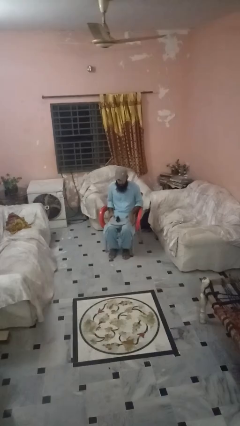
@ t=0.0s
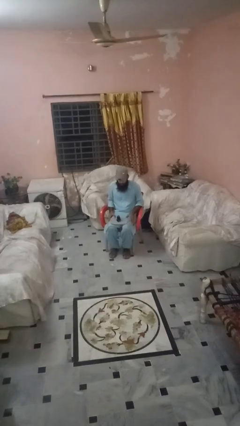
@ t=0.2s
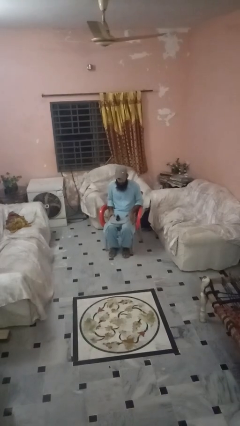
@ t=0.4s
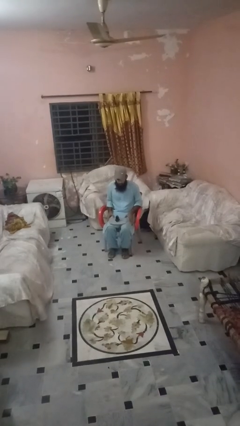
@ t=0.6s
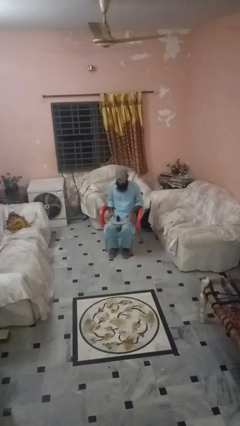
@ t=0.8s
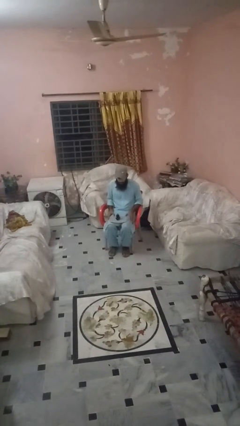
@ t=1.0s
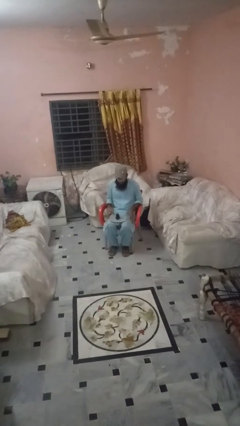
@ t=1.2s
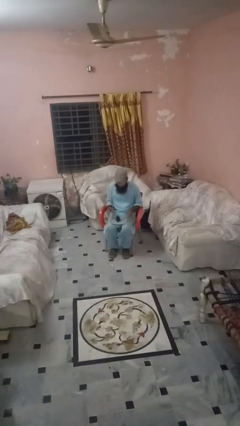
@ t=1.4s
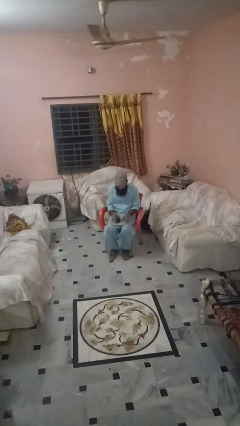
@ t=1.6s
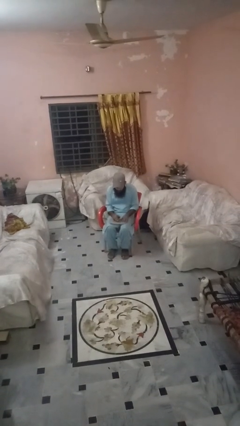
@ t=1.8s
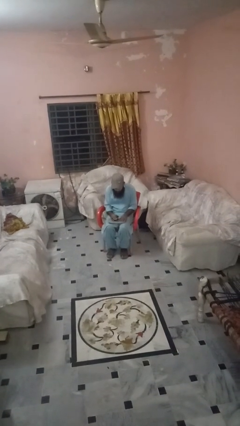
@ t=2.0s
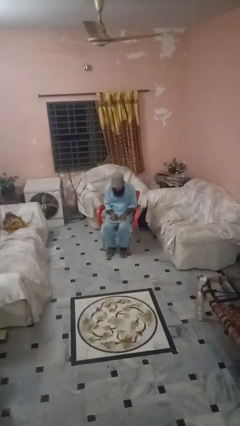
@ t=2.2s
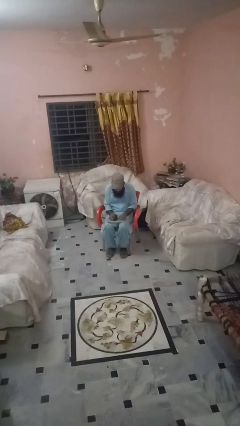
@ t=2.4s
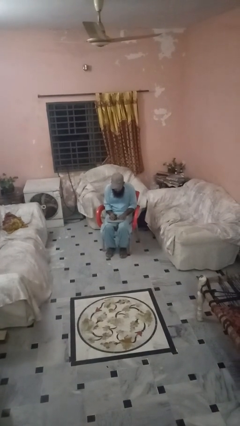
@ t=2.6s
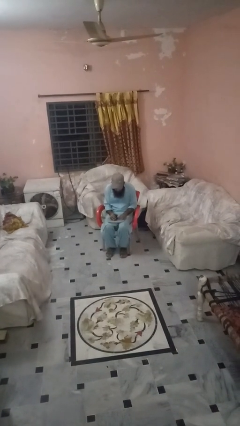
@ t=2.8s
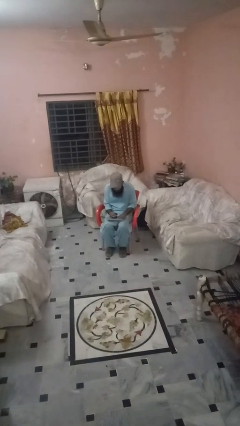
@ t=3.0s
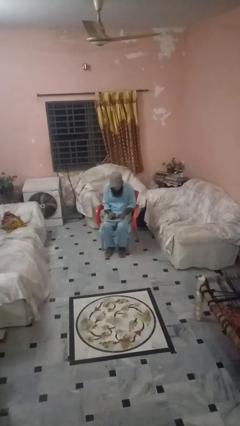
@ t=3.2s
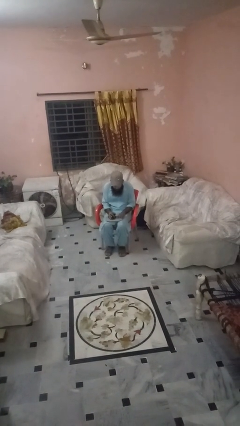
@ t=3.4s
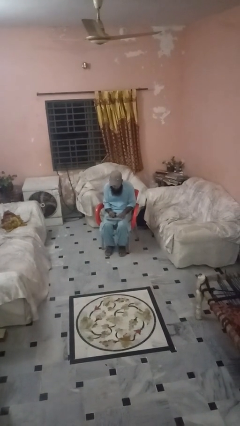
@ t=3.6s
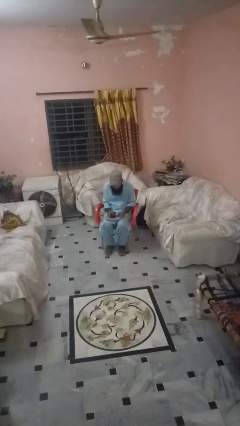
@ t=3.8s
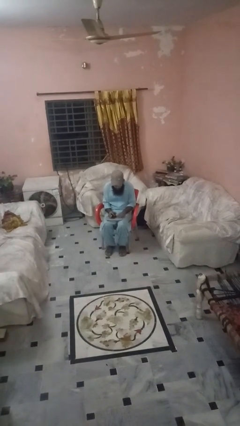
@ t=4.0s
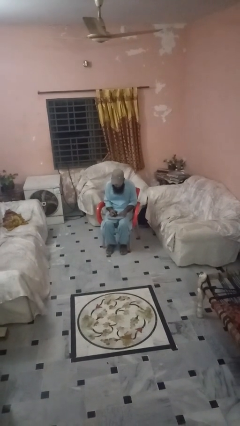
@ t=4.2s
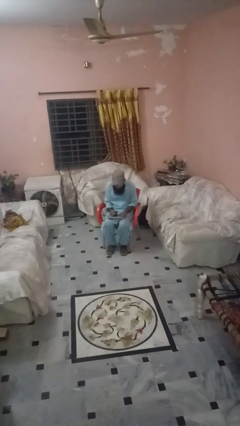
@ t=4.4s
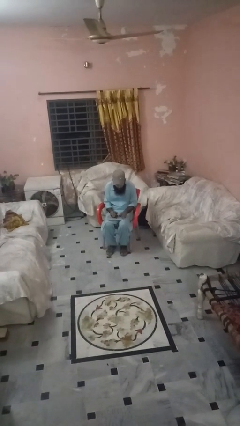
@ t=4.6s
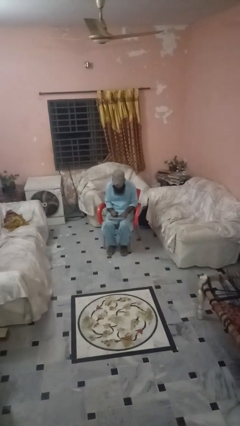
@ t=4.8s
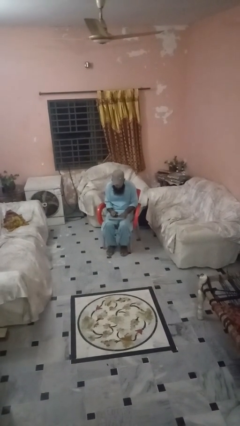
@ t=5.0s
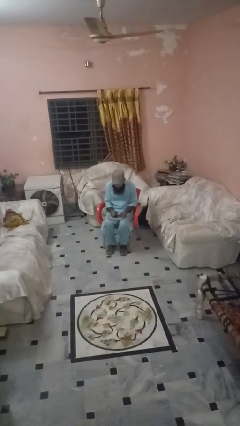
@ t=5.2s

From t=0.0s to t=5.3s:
person interacts with handheld game

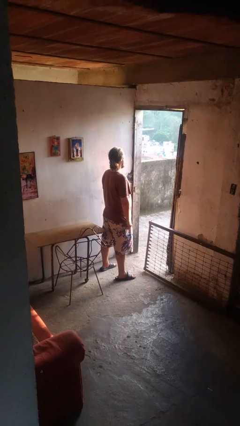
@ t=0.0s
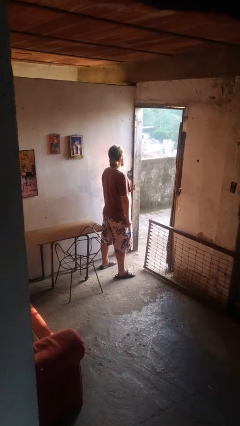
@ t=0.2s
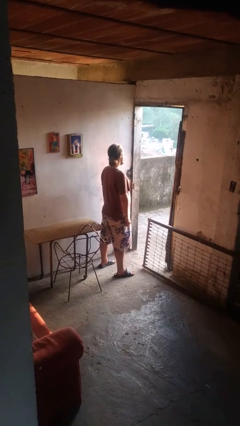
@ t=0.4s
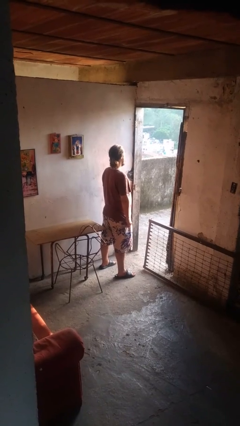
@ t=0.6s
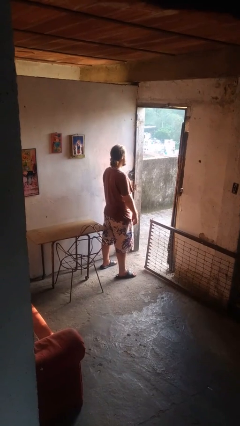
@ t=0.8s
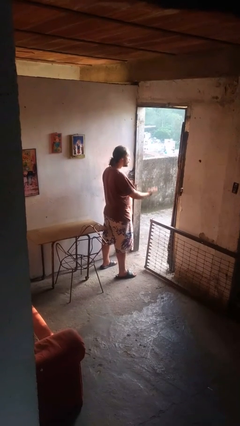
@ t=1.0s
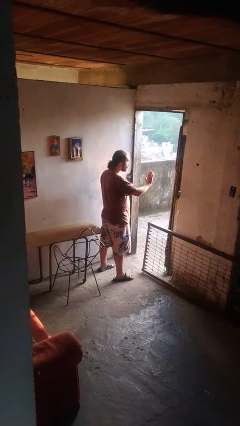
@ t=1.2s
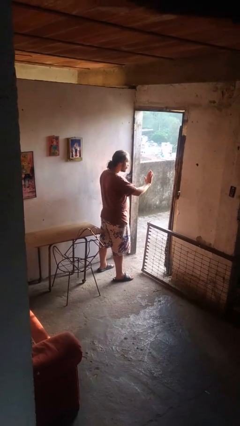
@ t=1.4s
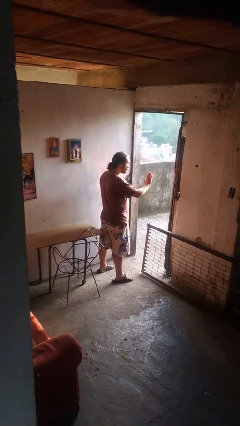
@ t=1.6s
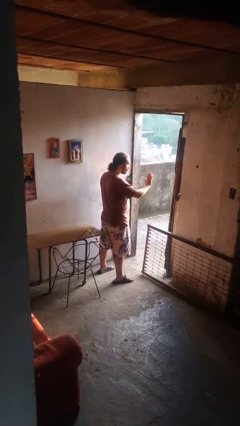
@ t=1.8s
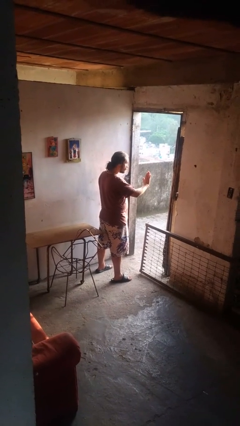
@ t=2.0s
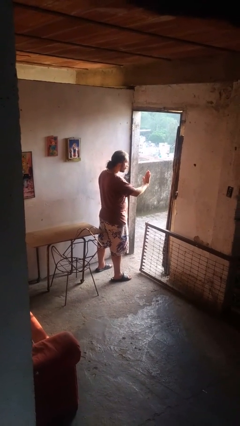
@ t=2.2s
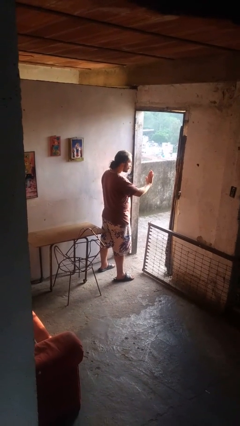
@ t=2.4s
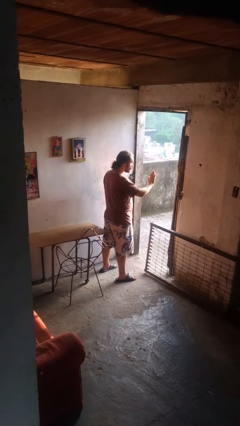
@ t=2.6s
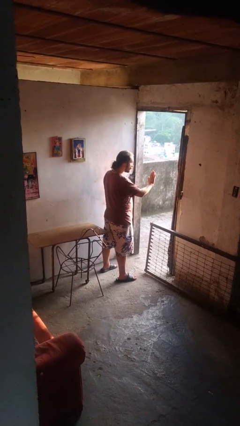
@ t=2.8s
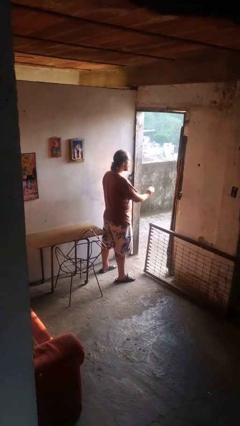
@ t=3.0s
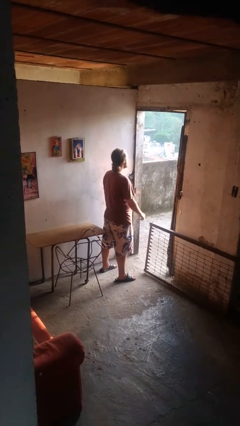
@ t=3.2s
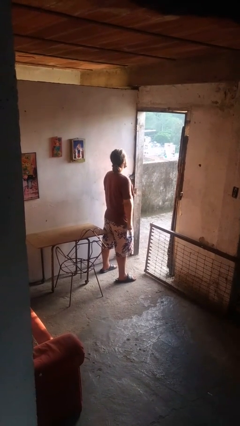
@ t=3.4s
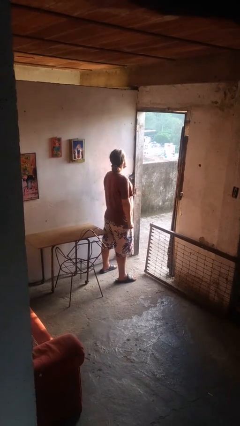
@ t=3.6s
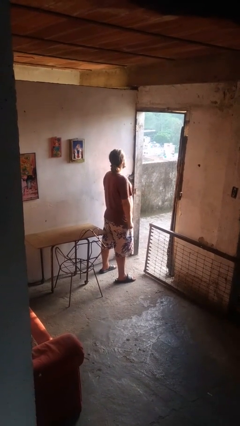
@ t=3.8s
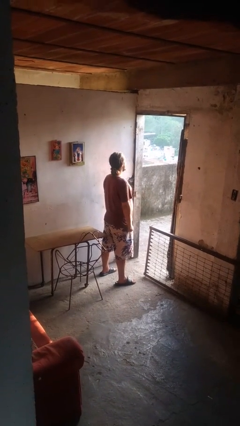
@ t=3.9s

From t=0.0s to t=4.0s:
person gestures stop

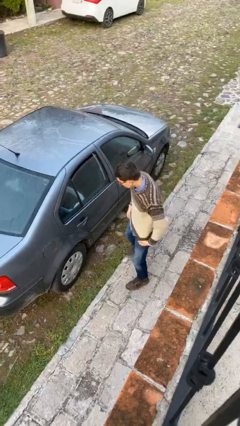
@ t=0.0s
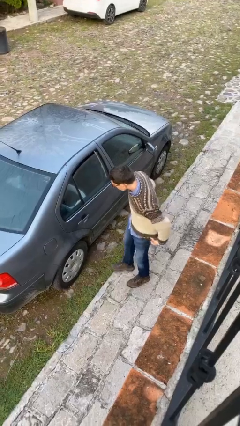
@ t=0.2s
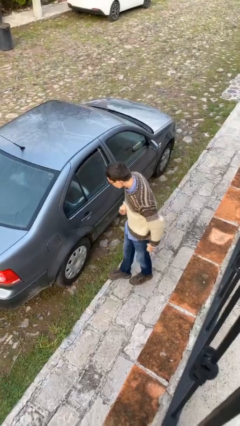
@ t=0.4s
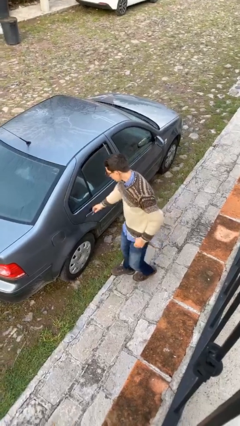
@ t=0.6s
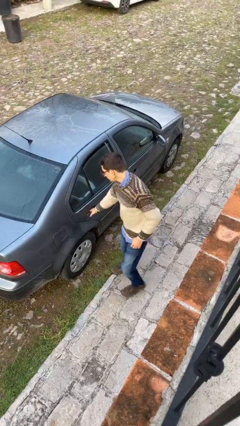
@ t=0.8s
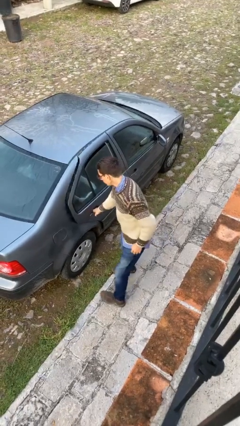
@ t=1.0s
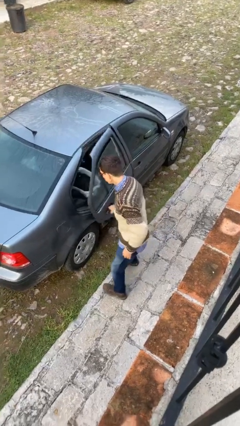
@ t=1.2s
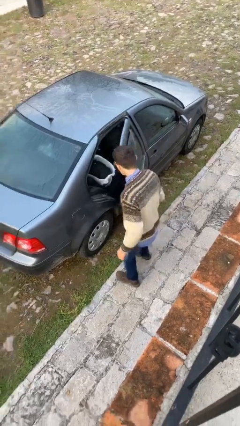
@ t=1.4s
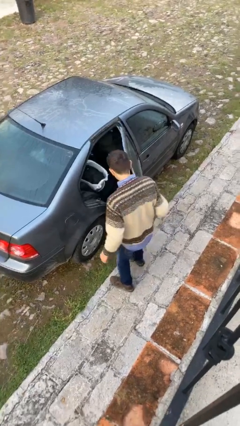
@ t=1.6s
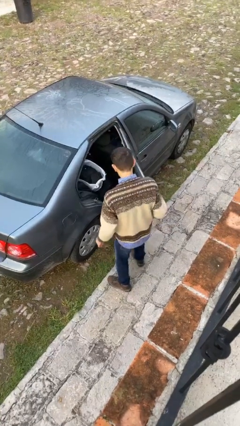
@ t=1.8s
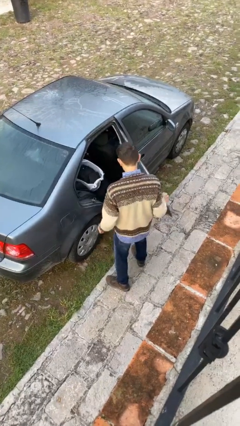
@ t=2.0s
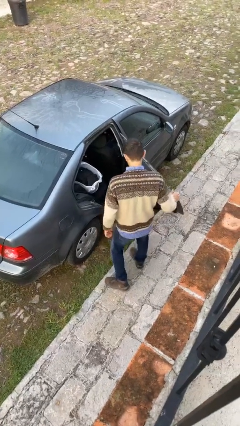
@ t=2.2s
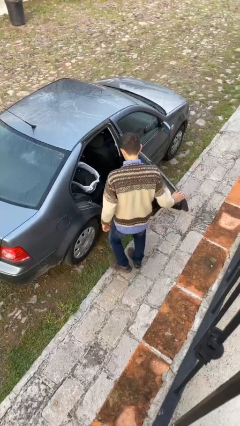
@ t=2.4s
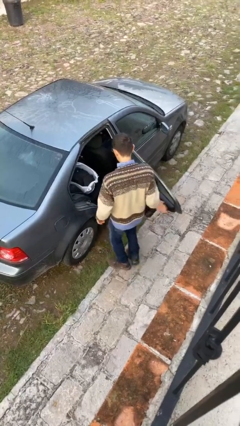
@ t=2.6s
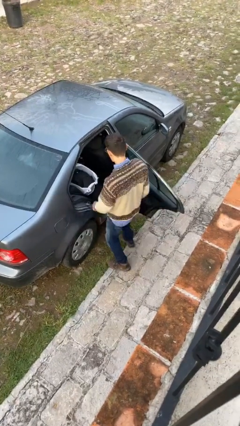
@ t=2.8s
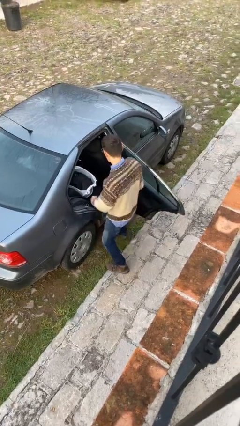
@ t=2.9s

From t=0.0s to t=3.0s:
person opens car door

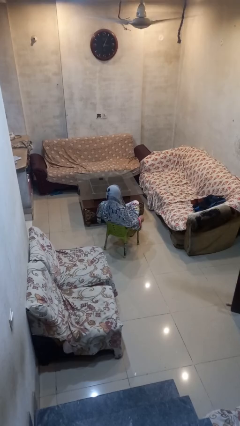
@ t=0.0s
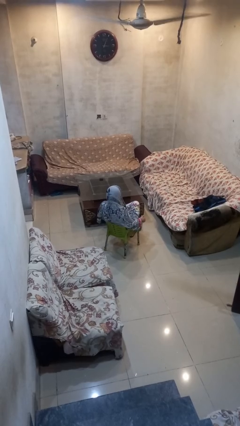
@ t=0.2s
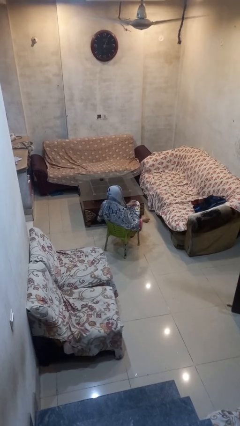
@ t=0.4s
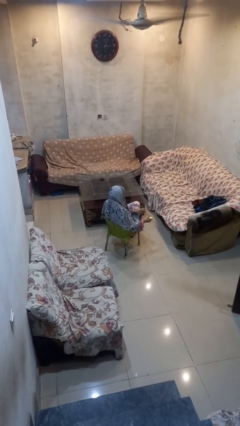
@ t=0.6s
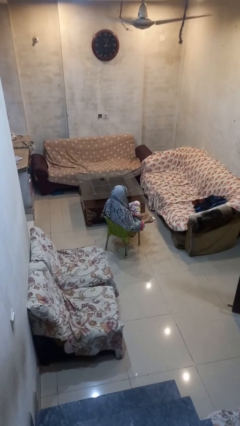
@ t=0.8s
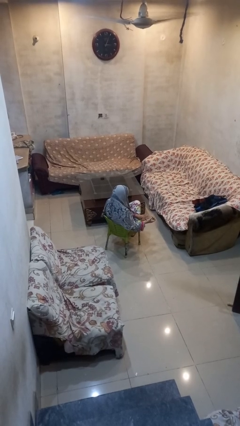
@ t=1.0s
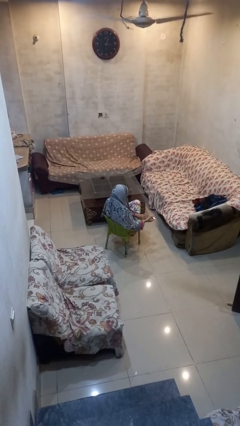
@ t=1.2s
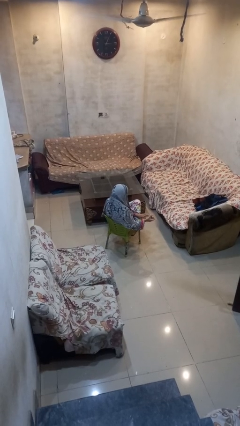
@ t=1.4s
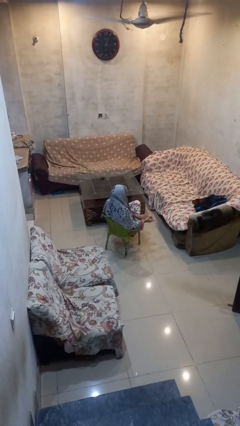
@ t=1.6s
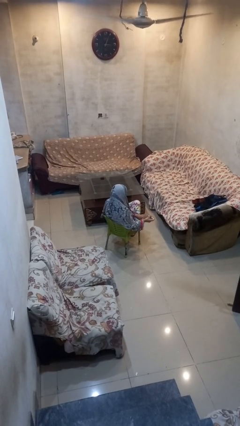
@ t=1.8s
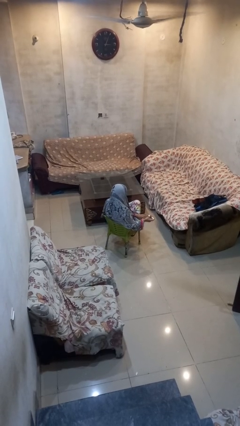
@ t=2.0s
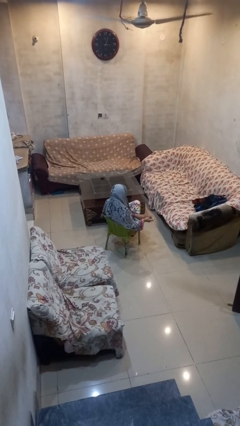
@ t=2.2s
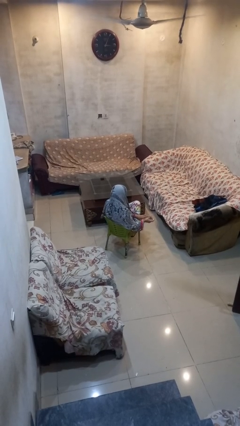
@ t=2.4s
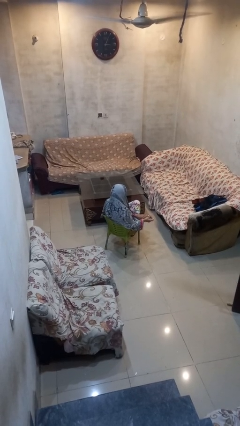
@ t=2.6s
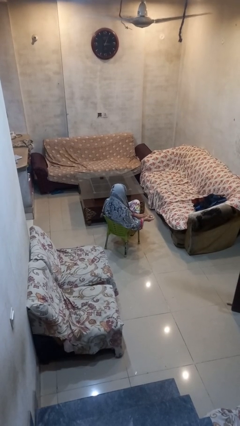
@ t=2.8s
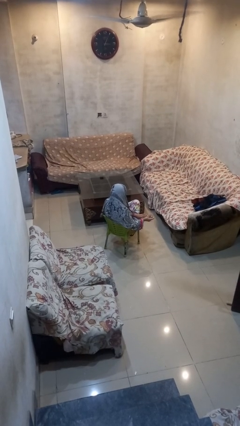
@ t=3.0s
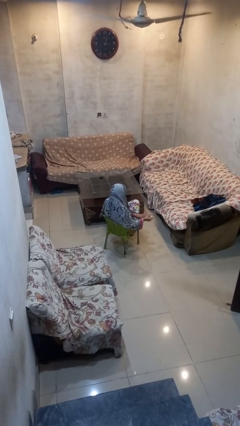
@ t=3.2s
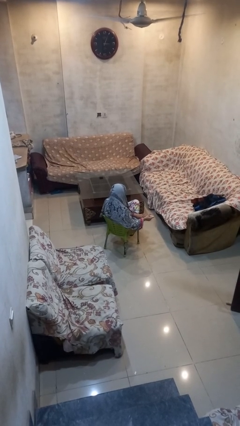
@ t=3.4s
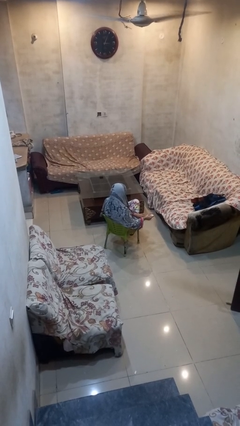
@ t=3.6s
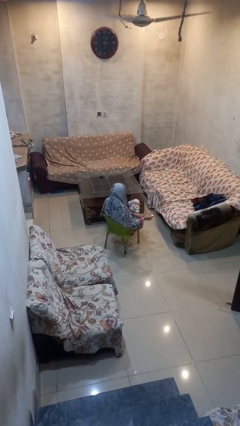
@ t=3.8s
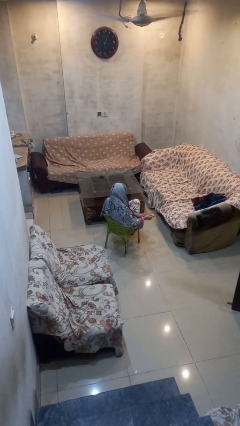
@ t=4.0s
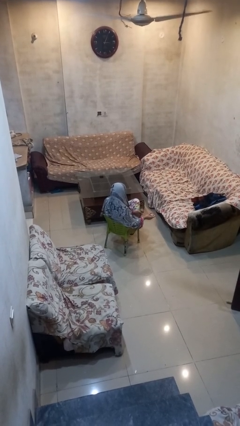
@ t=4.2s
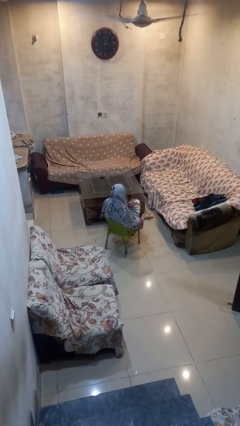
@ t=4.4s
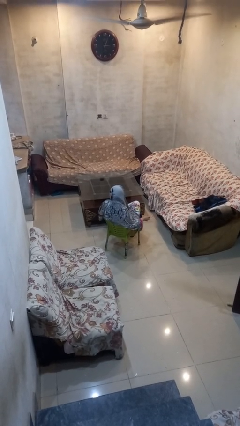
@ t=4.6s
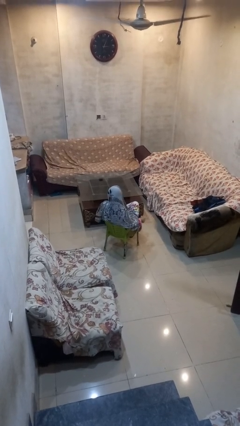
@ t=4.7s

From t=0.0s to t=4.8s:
person clips fingernails

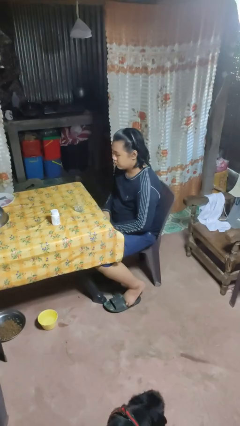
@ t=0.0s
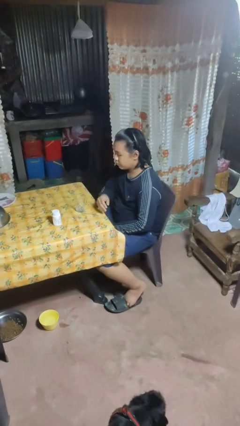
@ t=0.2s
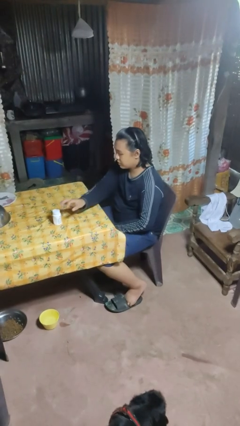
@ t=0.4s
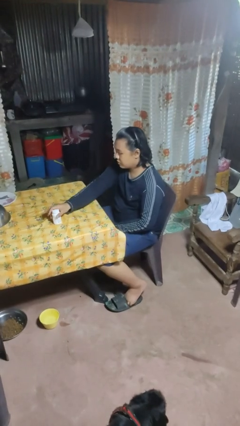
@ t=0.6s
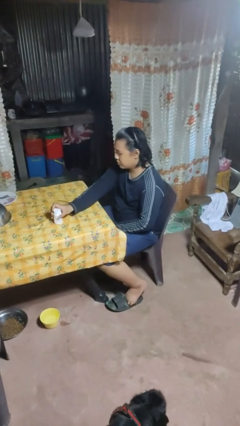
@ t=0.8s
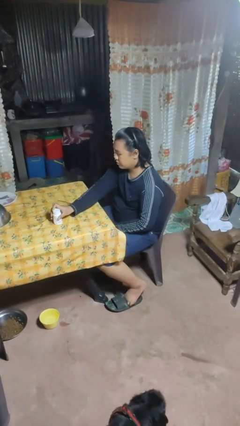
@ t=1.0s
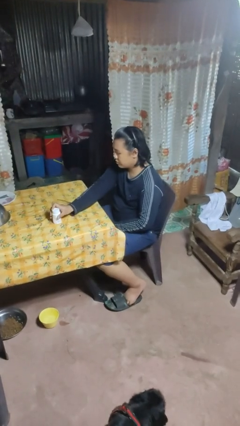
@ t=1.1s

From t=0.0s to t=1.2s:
person knocks over glass
